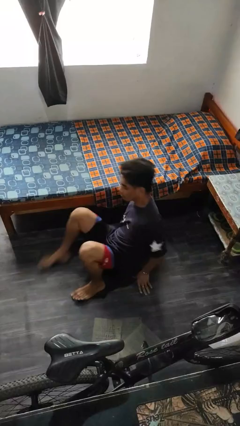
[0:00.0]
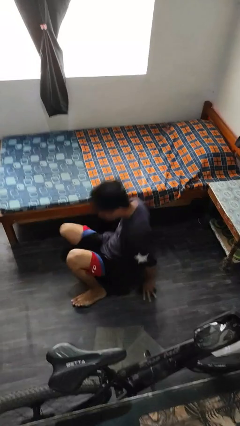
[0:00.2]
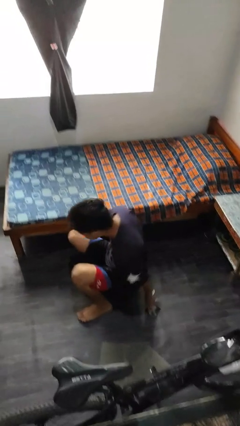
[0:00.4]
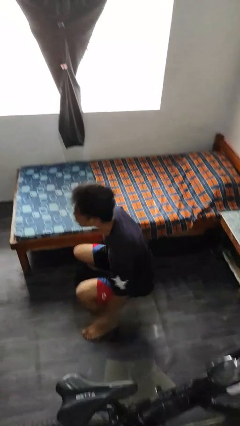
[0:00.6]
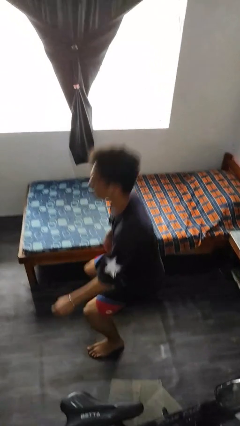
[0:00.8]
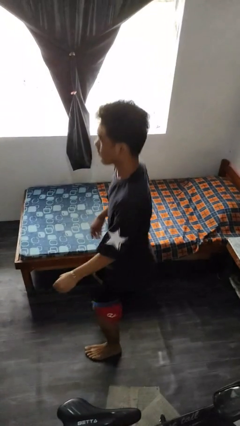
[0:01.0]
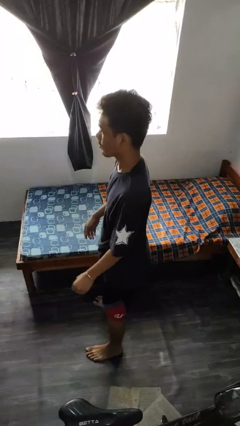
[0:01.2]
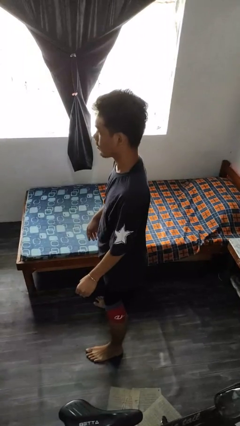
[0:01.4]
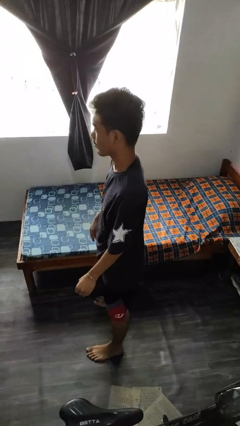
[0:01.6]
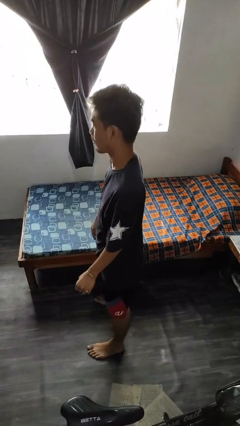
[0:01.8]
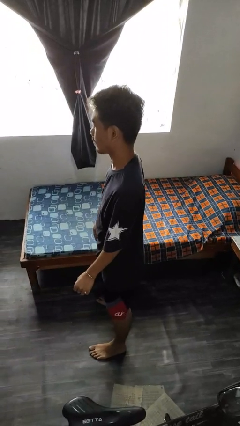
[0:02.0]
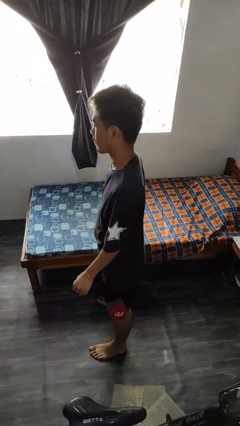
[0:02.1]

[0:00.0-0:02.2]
person stands up from floor

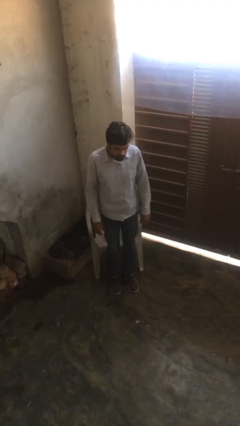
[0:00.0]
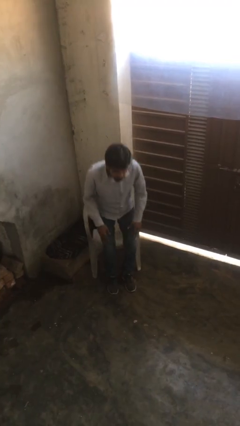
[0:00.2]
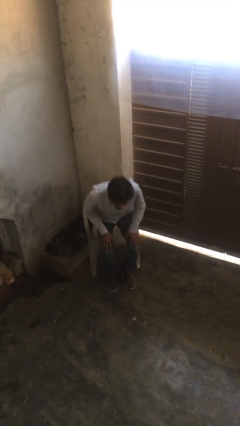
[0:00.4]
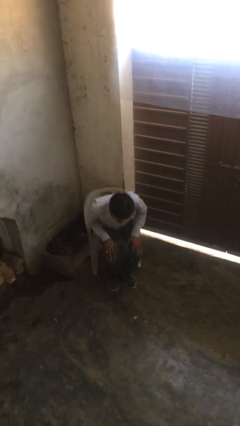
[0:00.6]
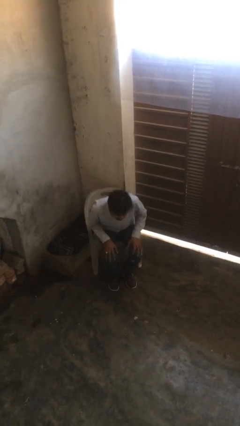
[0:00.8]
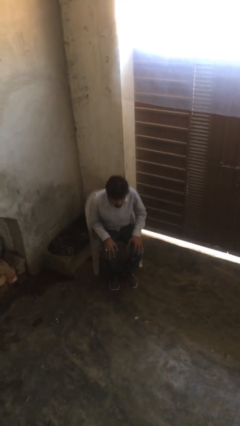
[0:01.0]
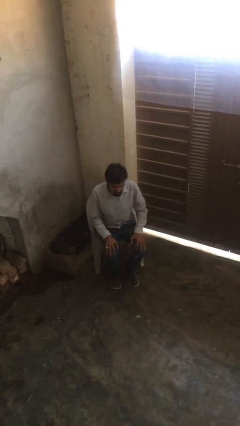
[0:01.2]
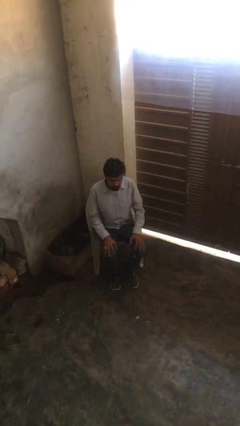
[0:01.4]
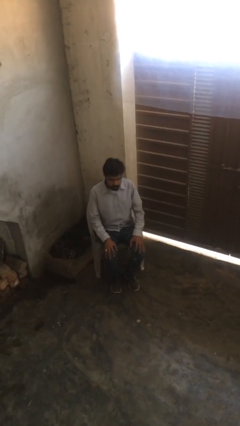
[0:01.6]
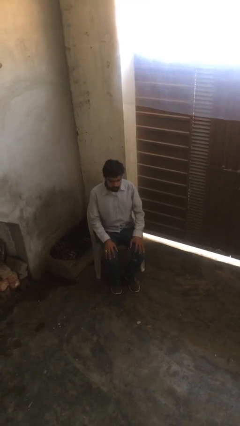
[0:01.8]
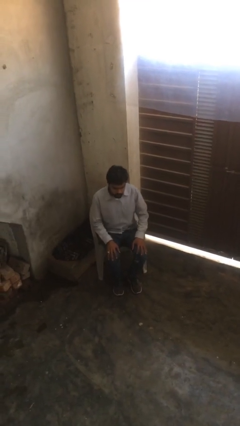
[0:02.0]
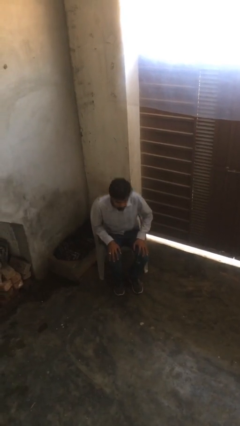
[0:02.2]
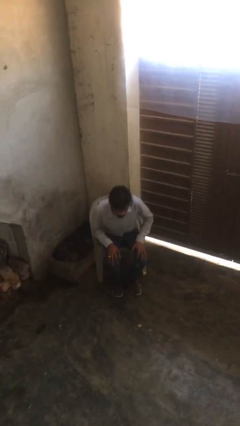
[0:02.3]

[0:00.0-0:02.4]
person sits down

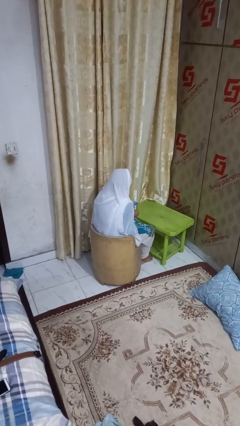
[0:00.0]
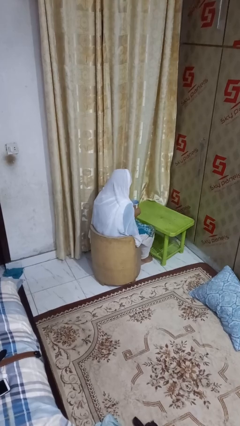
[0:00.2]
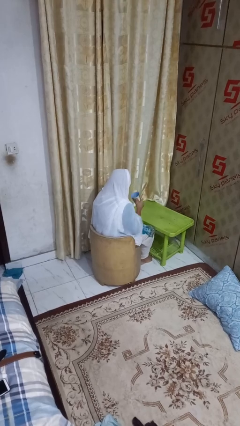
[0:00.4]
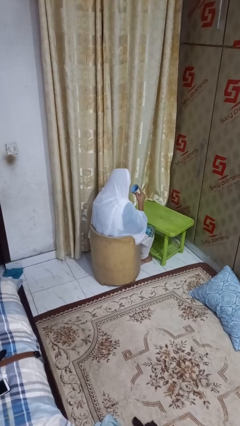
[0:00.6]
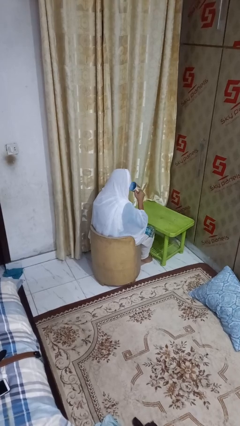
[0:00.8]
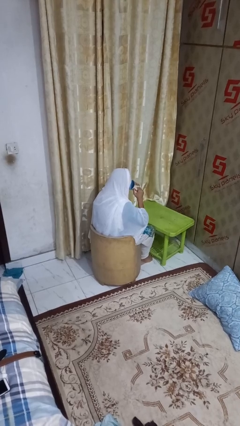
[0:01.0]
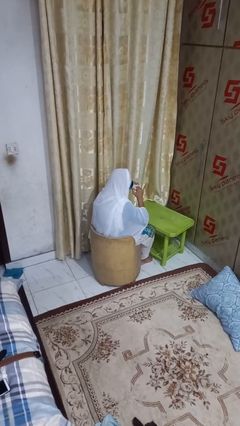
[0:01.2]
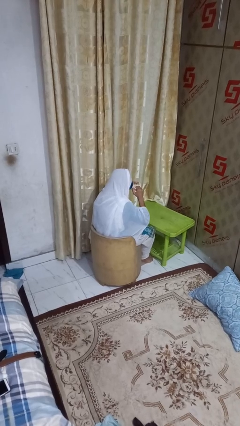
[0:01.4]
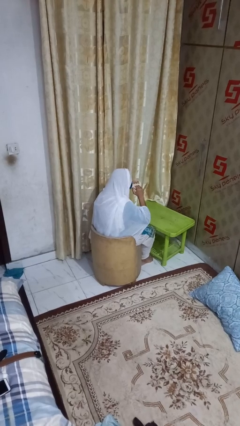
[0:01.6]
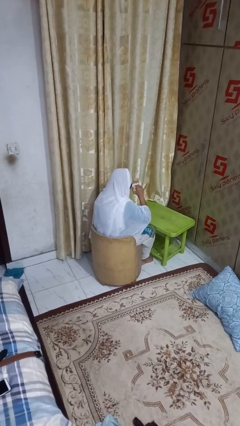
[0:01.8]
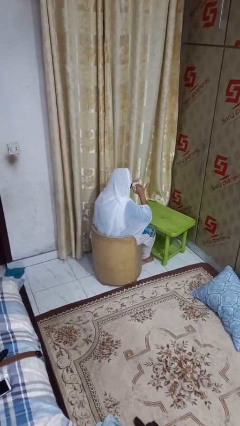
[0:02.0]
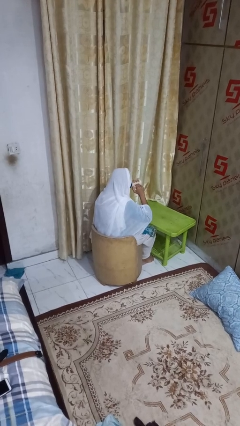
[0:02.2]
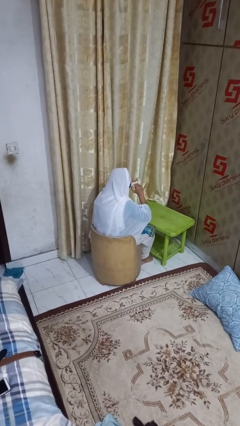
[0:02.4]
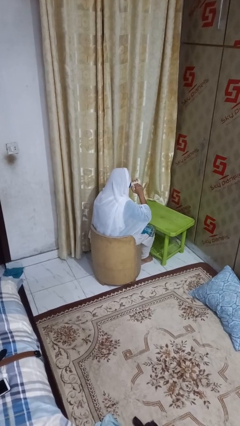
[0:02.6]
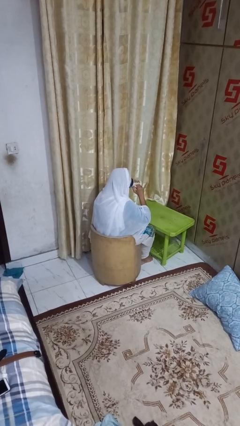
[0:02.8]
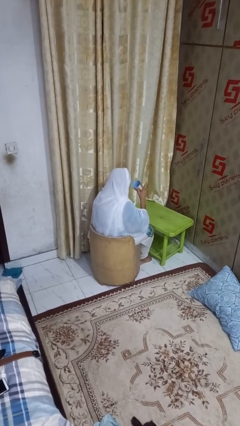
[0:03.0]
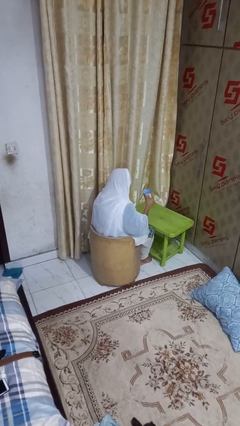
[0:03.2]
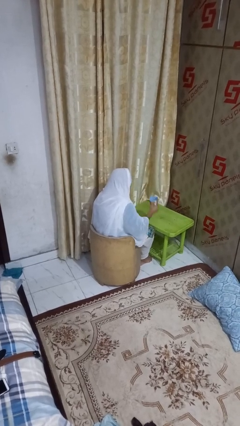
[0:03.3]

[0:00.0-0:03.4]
person drinks from mug

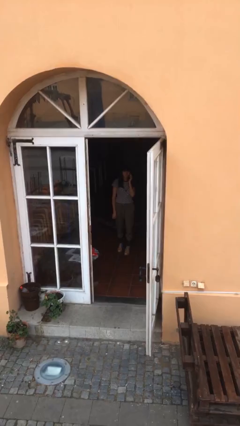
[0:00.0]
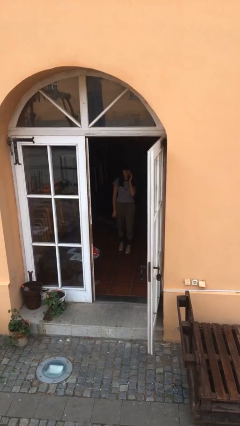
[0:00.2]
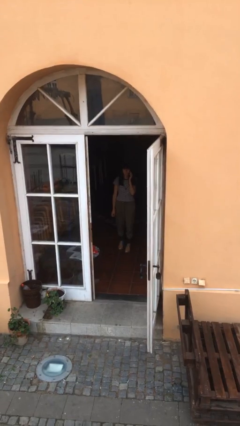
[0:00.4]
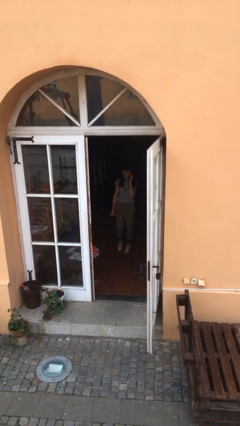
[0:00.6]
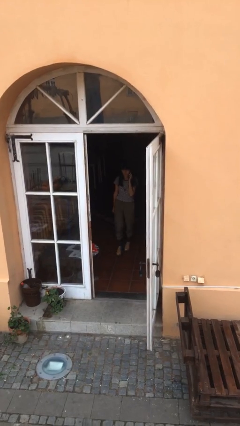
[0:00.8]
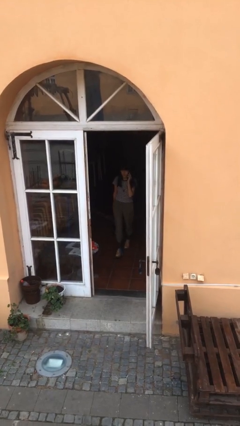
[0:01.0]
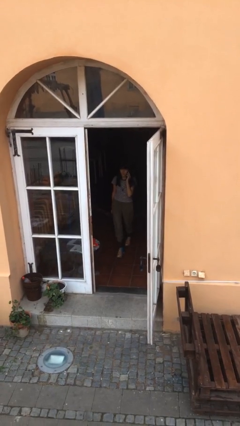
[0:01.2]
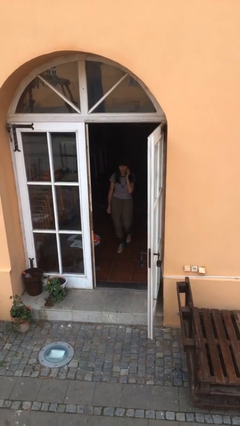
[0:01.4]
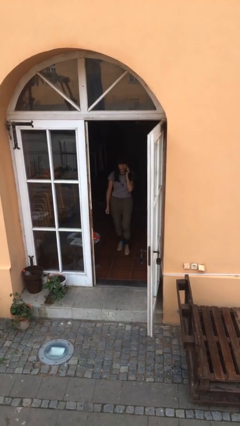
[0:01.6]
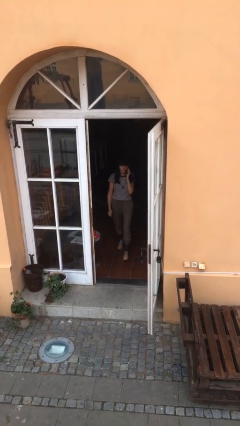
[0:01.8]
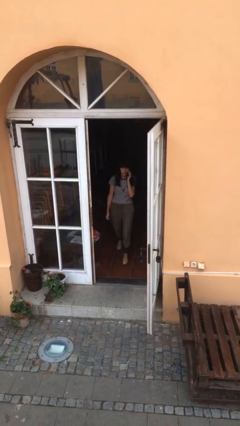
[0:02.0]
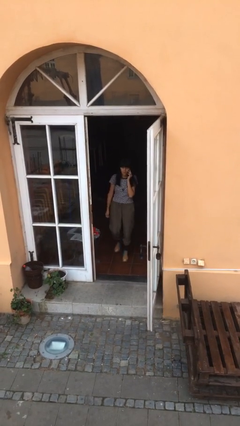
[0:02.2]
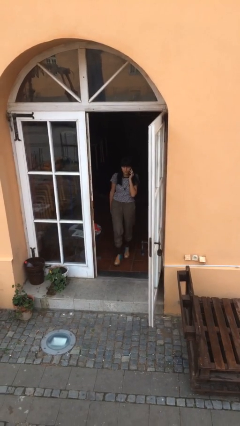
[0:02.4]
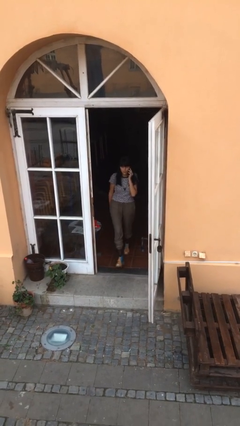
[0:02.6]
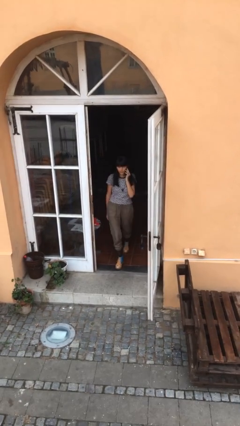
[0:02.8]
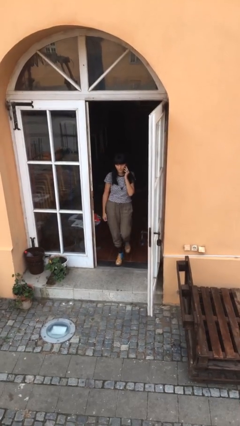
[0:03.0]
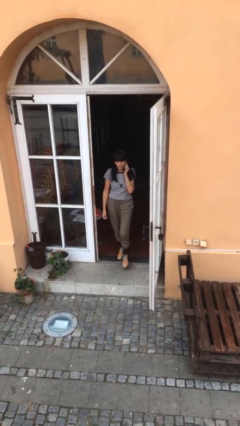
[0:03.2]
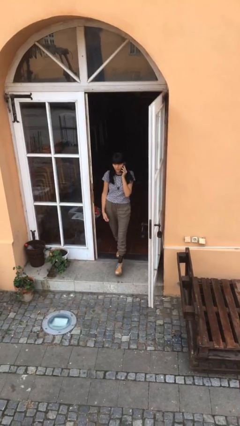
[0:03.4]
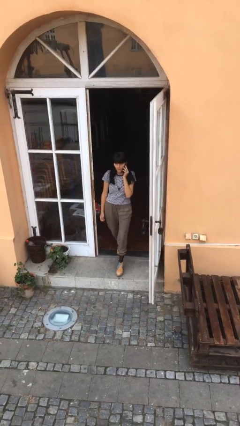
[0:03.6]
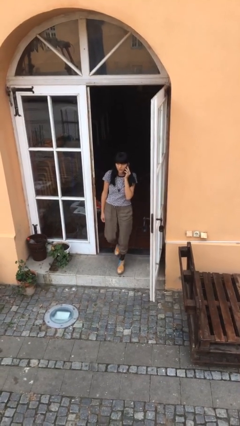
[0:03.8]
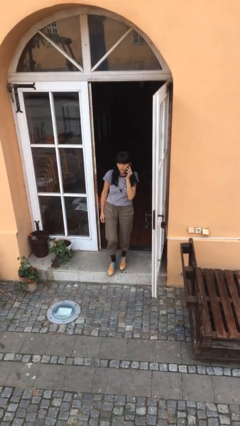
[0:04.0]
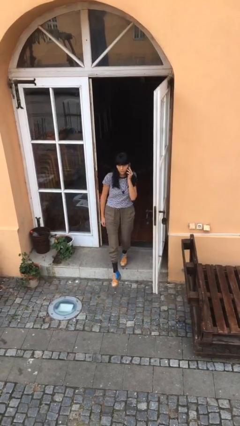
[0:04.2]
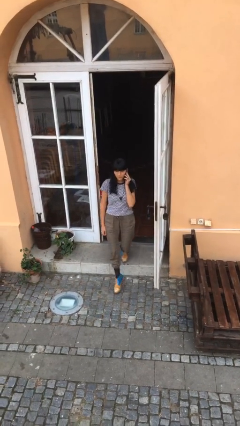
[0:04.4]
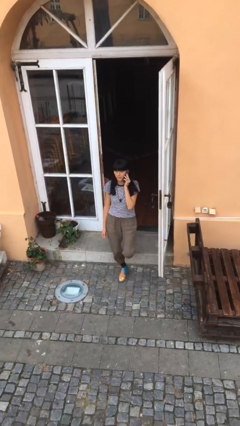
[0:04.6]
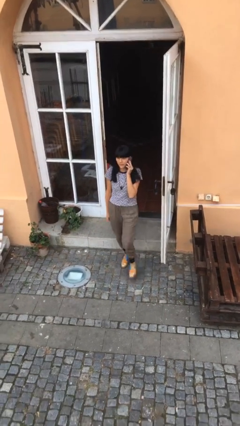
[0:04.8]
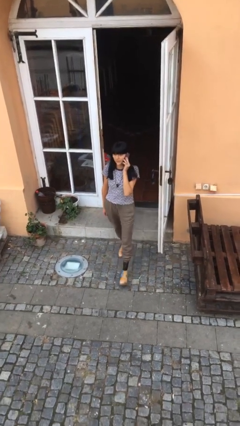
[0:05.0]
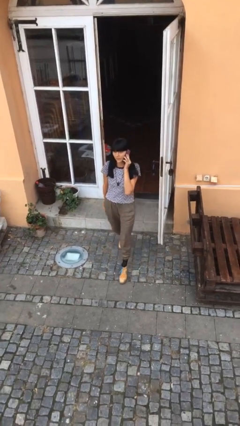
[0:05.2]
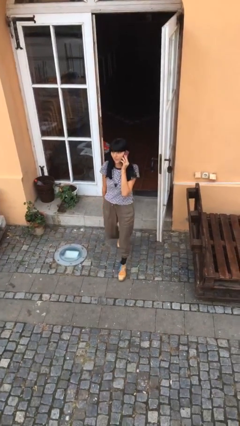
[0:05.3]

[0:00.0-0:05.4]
person enters scene through structure

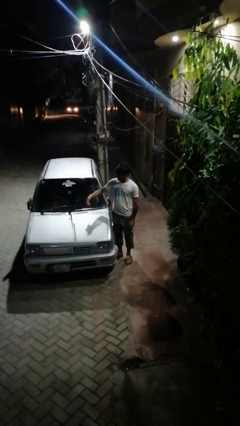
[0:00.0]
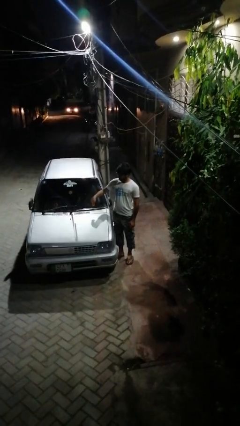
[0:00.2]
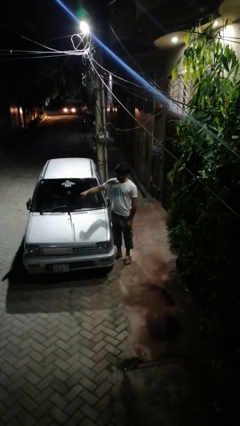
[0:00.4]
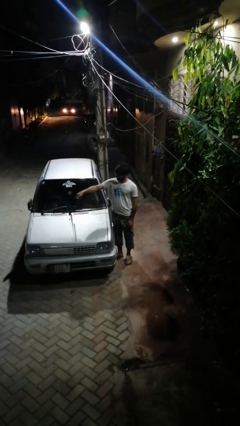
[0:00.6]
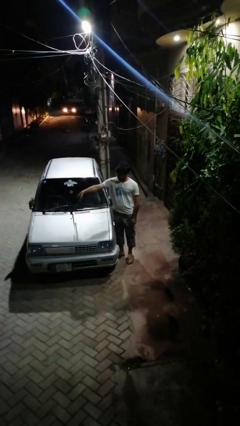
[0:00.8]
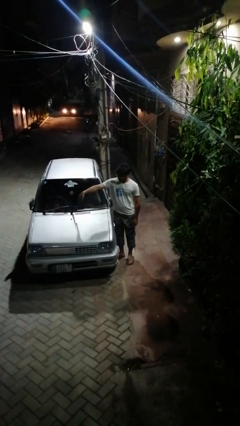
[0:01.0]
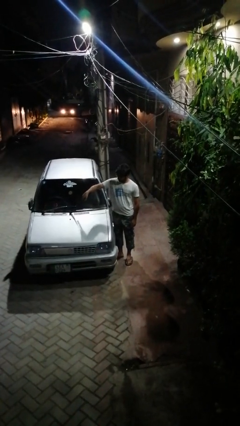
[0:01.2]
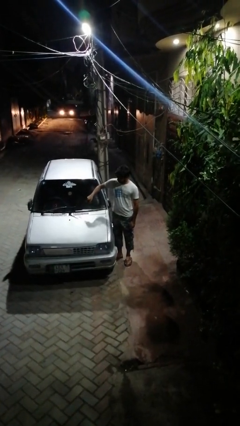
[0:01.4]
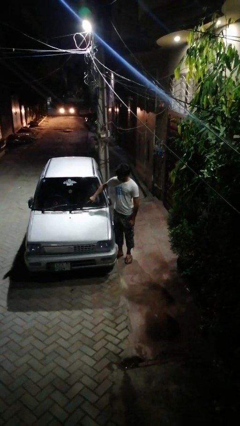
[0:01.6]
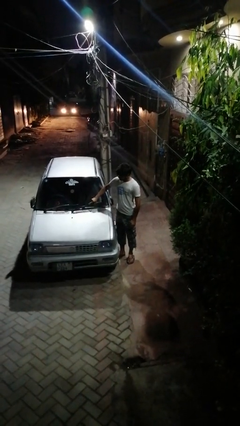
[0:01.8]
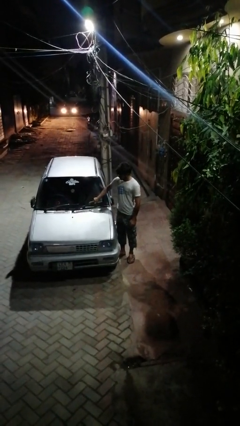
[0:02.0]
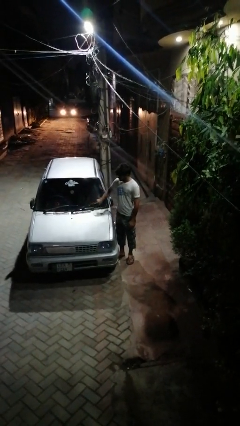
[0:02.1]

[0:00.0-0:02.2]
person flips down car wipers

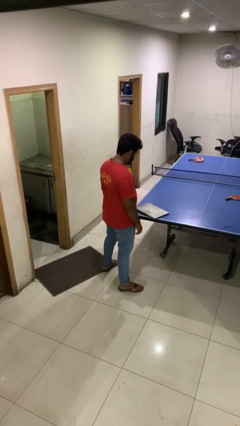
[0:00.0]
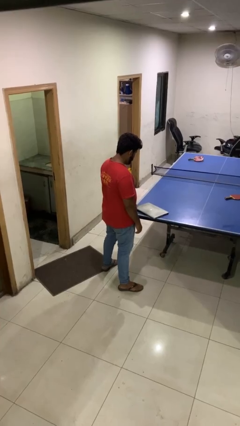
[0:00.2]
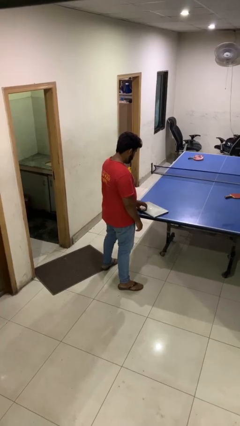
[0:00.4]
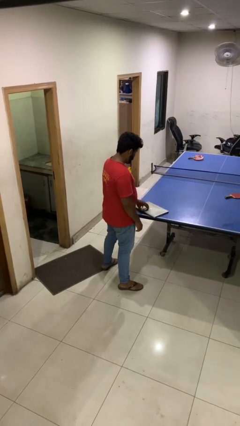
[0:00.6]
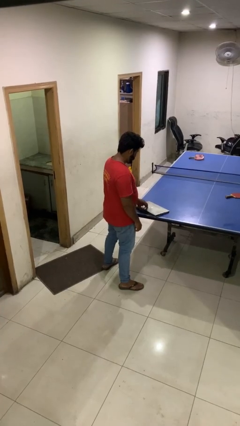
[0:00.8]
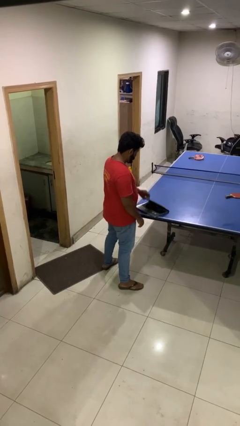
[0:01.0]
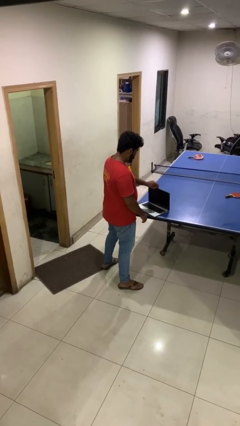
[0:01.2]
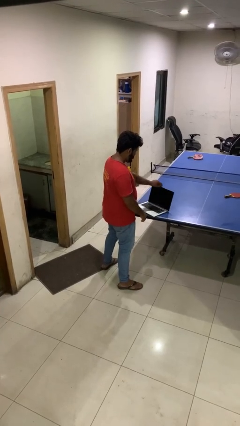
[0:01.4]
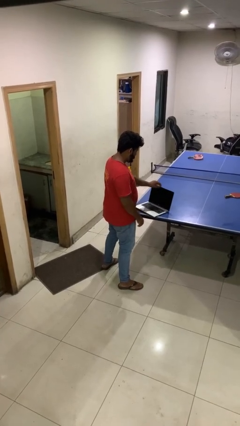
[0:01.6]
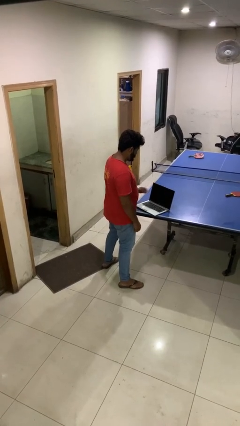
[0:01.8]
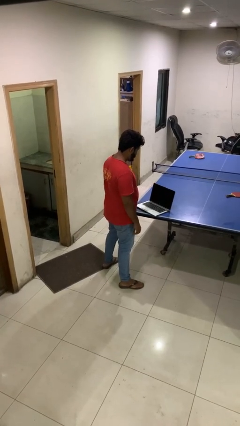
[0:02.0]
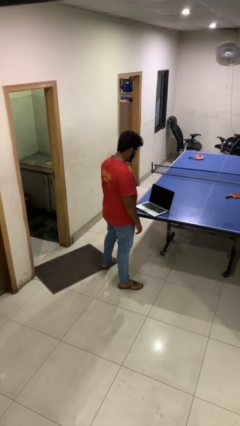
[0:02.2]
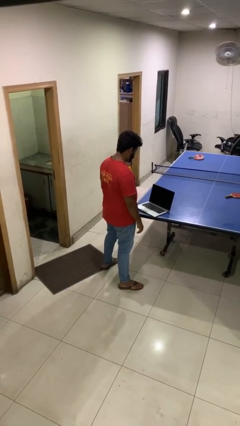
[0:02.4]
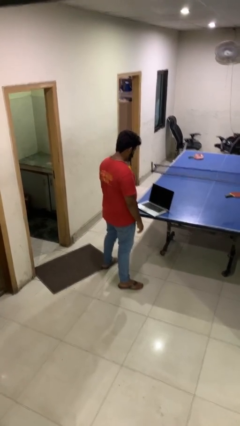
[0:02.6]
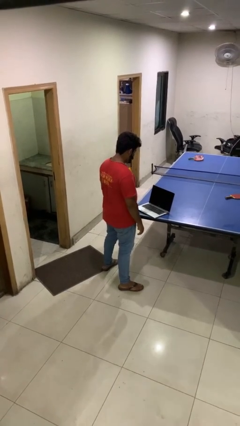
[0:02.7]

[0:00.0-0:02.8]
person opens laptop
